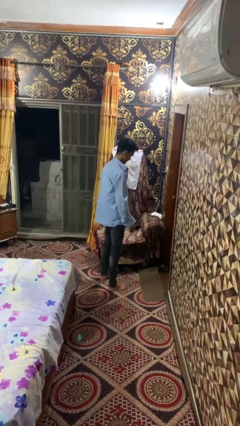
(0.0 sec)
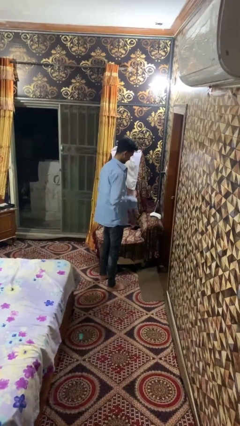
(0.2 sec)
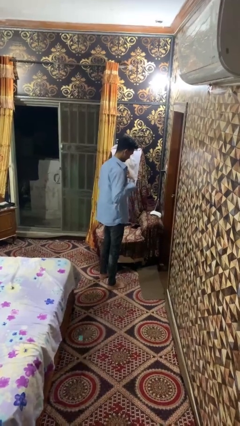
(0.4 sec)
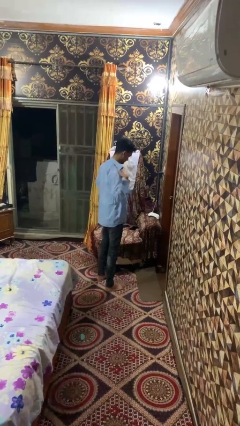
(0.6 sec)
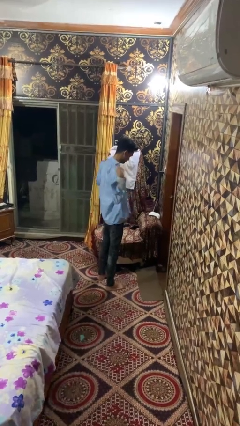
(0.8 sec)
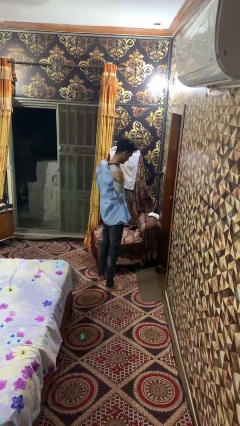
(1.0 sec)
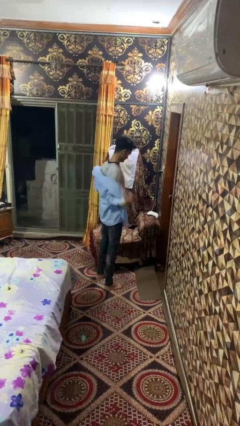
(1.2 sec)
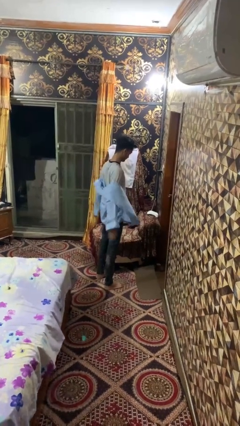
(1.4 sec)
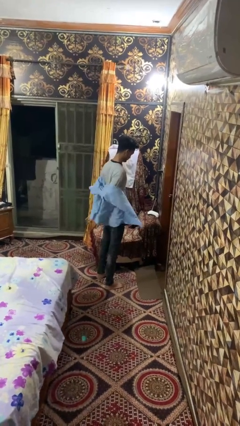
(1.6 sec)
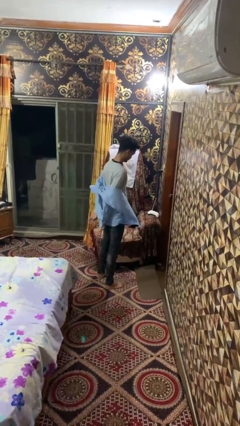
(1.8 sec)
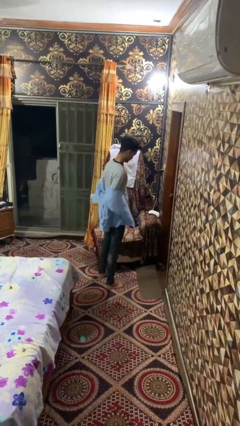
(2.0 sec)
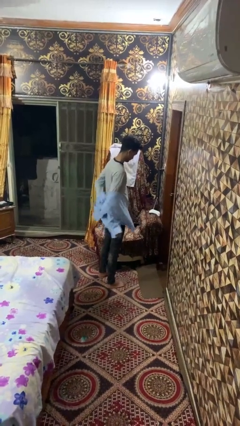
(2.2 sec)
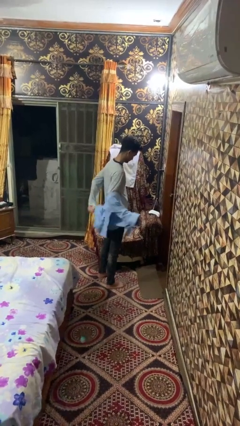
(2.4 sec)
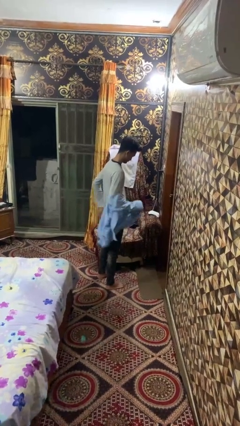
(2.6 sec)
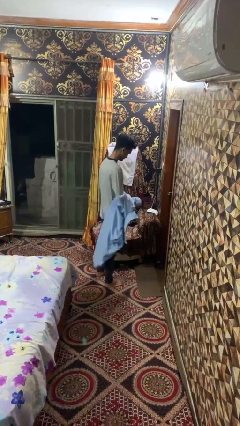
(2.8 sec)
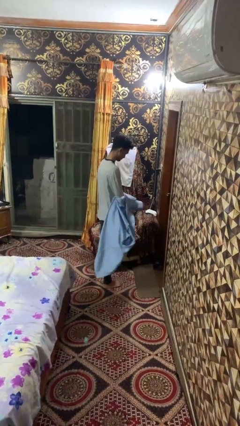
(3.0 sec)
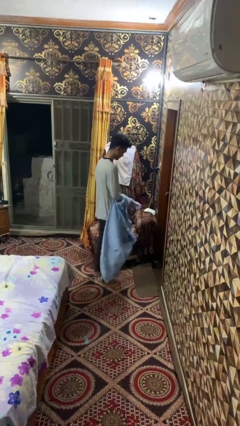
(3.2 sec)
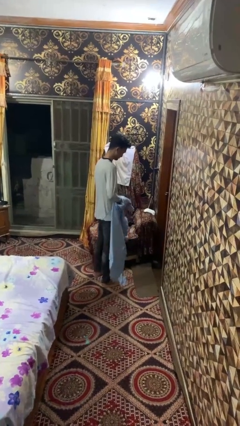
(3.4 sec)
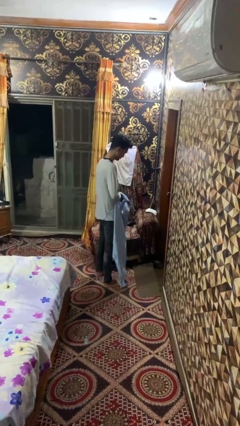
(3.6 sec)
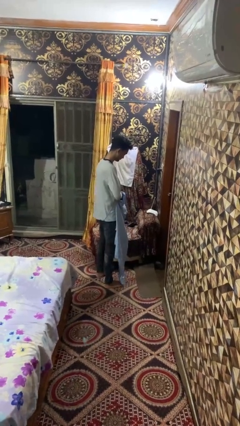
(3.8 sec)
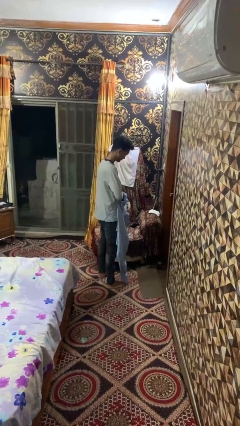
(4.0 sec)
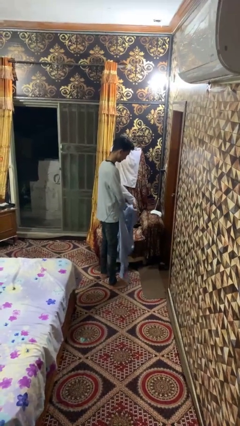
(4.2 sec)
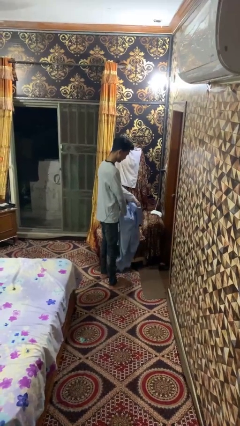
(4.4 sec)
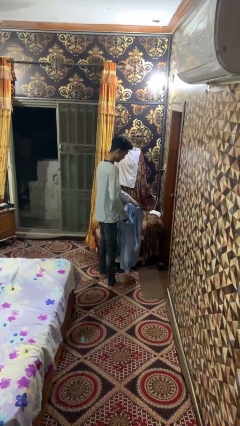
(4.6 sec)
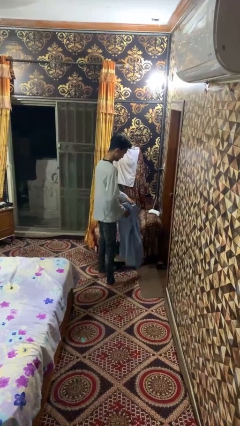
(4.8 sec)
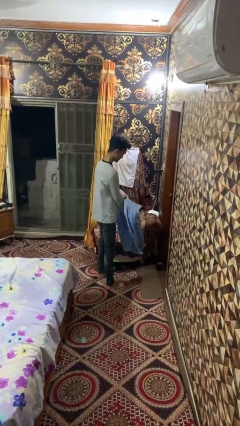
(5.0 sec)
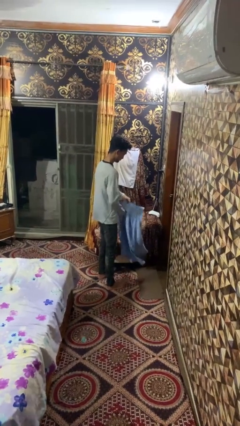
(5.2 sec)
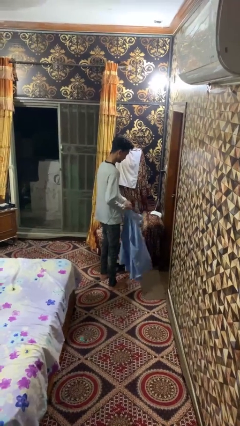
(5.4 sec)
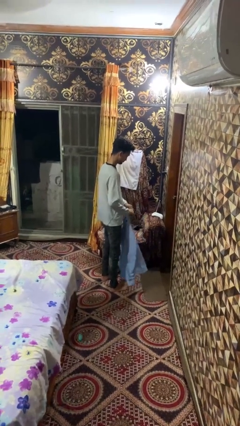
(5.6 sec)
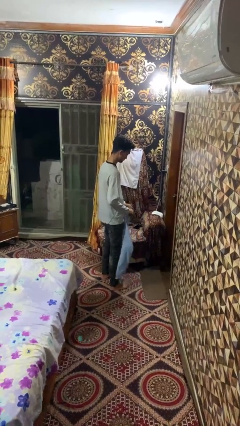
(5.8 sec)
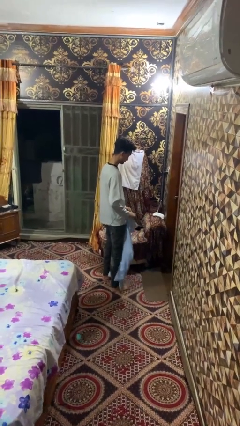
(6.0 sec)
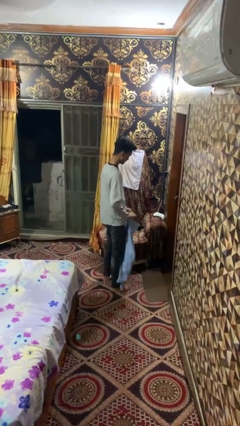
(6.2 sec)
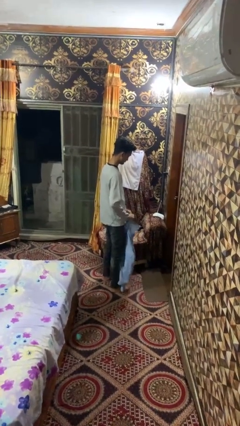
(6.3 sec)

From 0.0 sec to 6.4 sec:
person takes off shirt

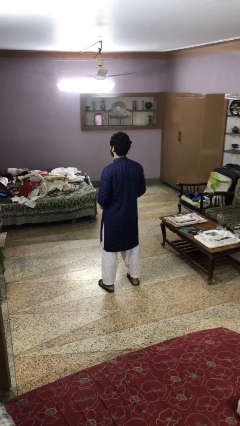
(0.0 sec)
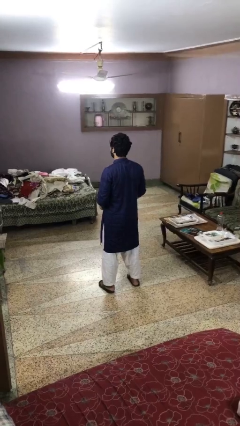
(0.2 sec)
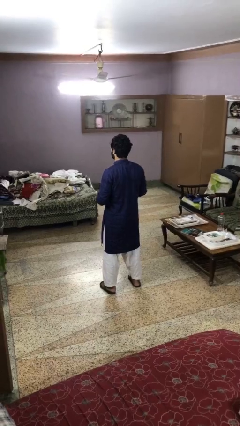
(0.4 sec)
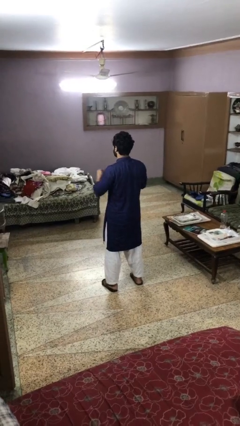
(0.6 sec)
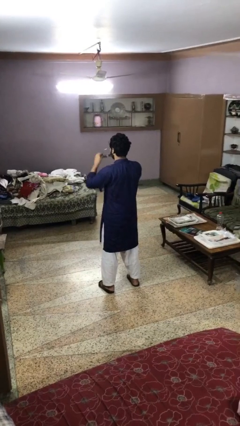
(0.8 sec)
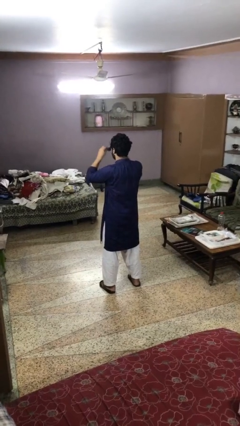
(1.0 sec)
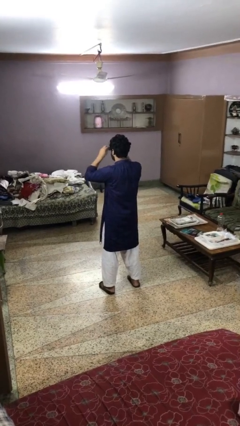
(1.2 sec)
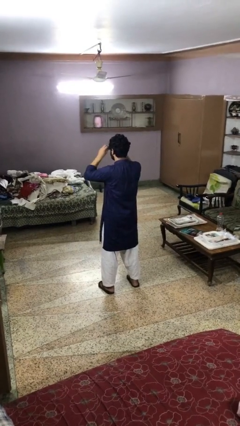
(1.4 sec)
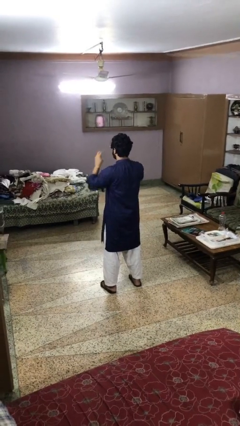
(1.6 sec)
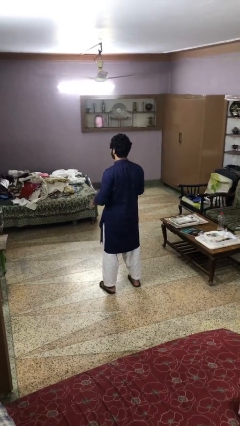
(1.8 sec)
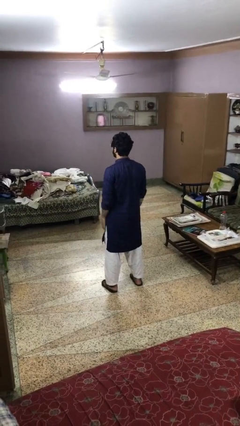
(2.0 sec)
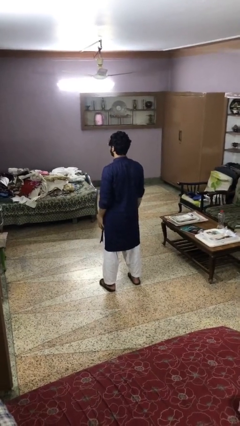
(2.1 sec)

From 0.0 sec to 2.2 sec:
person puts on sunglasses

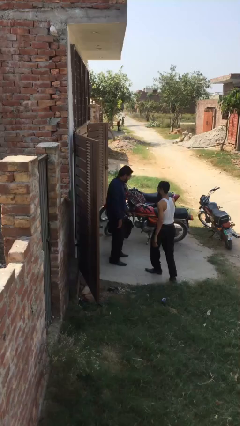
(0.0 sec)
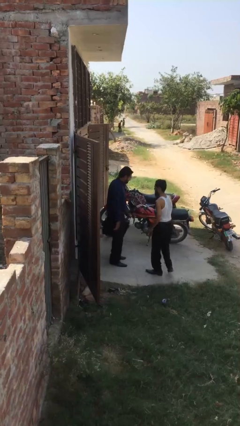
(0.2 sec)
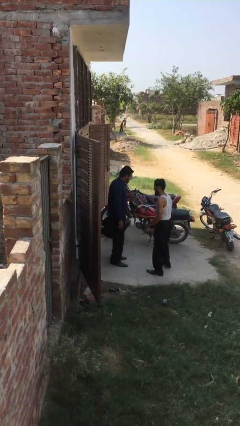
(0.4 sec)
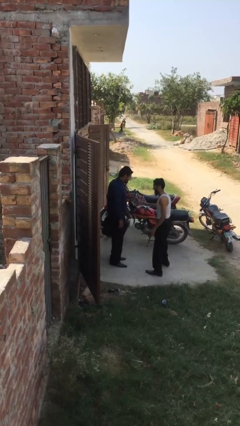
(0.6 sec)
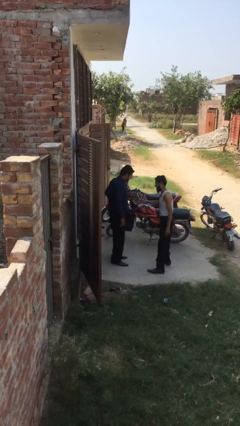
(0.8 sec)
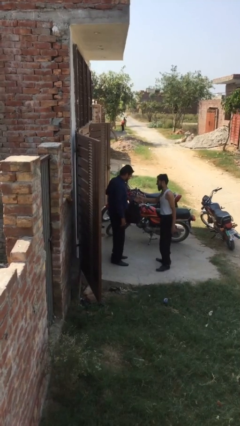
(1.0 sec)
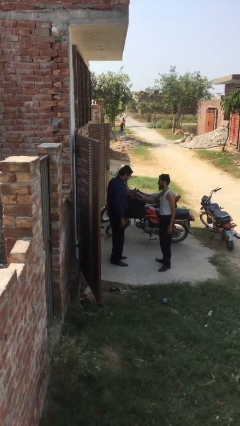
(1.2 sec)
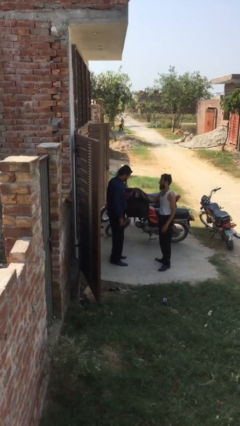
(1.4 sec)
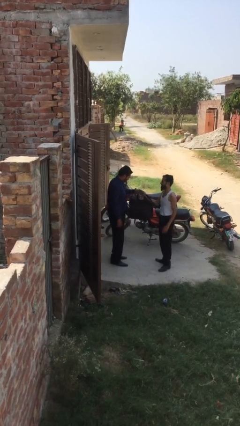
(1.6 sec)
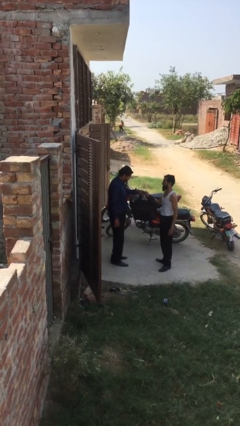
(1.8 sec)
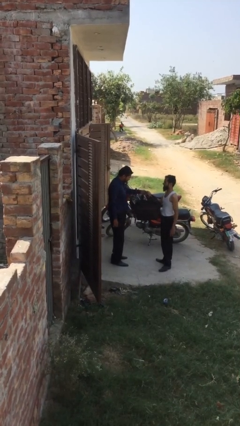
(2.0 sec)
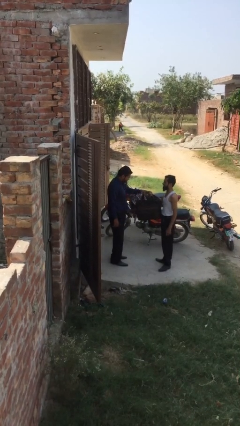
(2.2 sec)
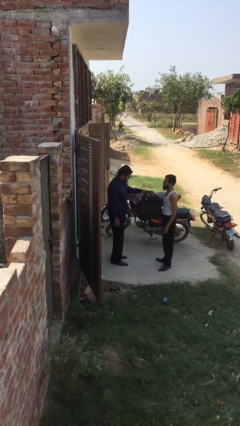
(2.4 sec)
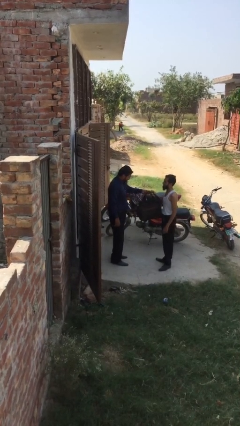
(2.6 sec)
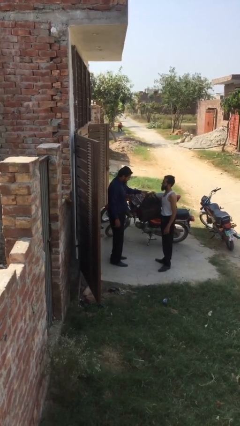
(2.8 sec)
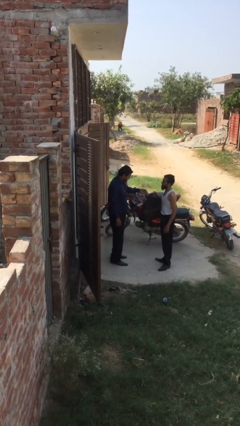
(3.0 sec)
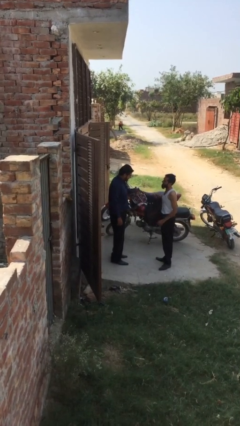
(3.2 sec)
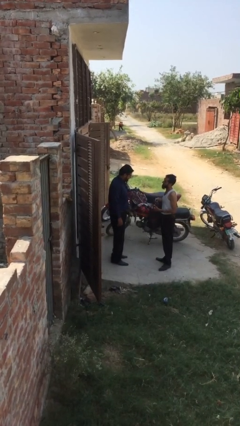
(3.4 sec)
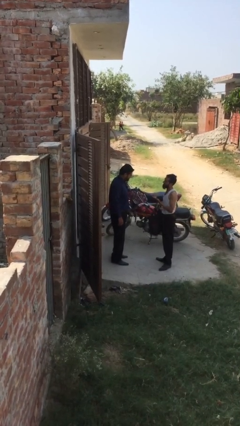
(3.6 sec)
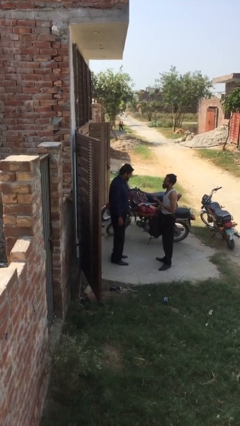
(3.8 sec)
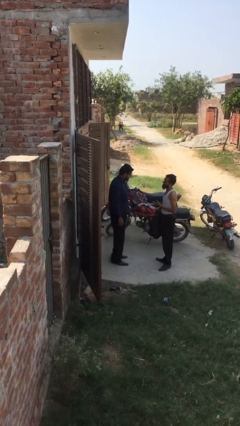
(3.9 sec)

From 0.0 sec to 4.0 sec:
person transfers object to person

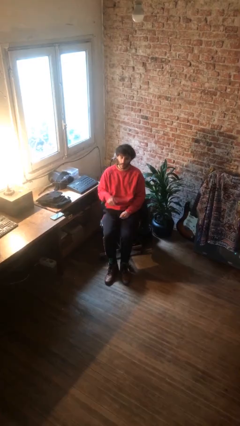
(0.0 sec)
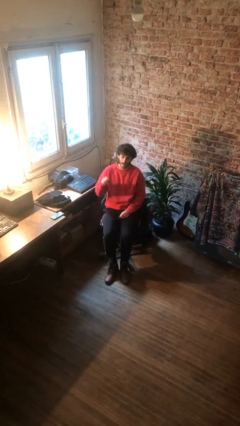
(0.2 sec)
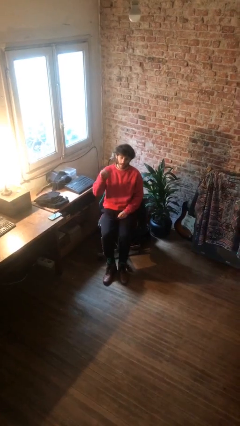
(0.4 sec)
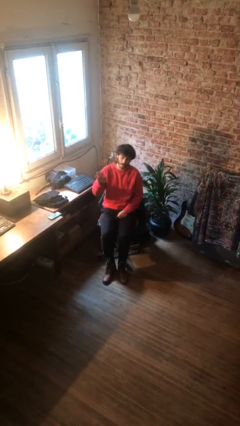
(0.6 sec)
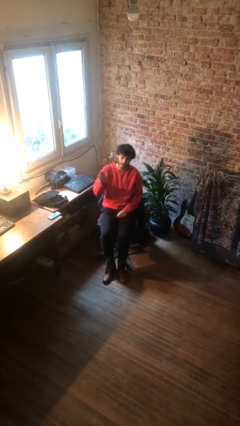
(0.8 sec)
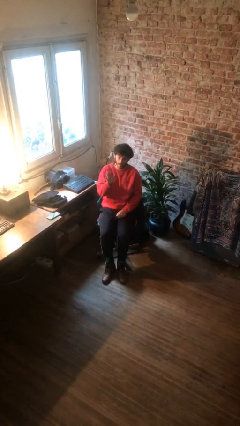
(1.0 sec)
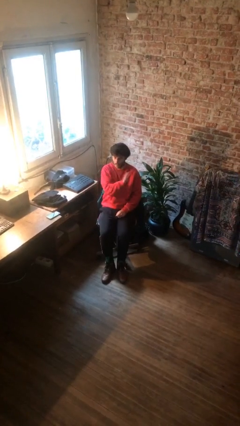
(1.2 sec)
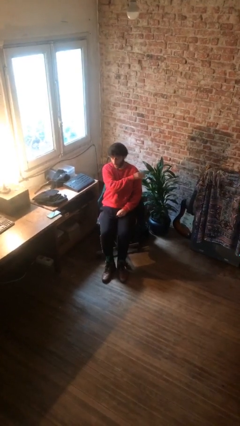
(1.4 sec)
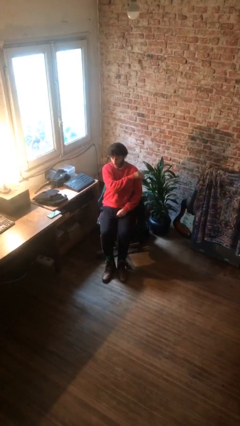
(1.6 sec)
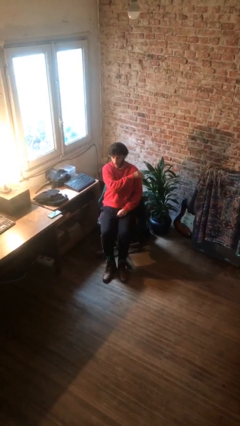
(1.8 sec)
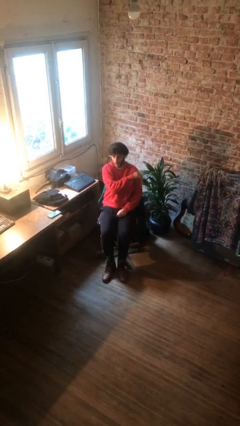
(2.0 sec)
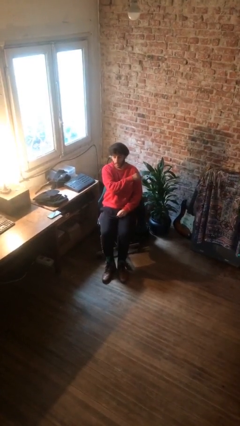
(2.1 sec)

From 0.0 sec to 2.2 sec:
person gestures swipe left

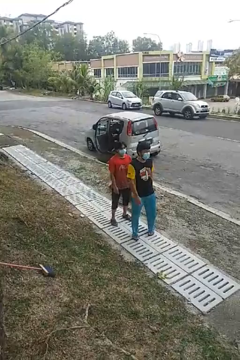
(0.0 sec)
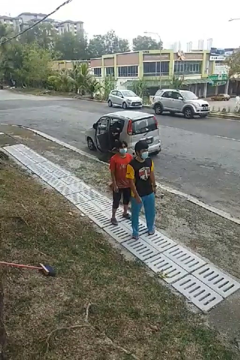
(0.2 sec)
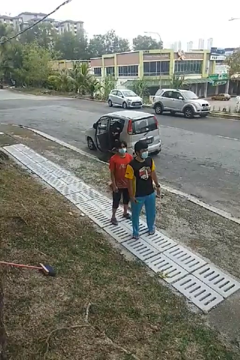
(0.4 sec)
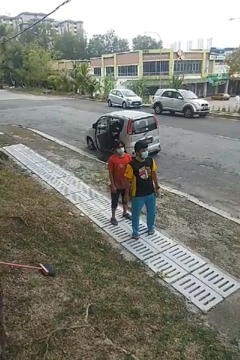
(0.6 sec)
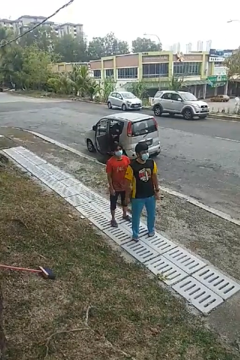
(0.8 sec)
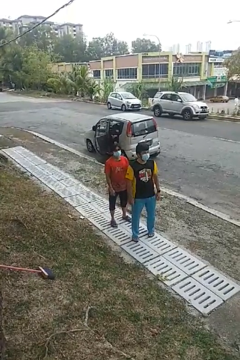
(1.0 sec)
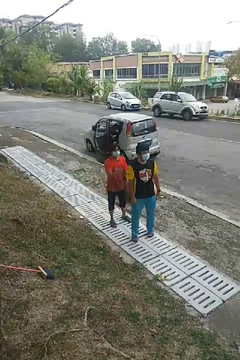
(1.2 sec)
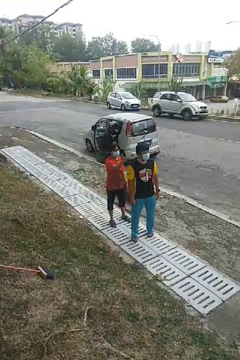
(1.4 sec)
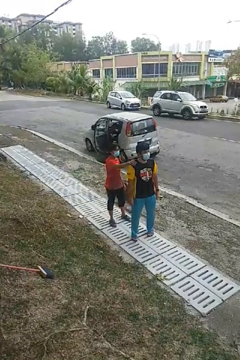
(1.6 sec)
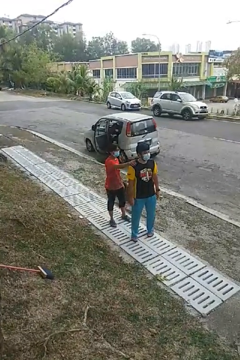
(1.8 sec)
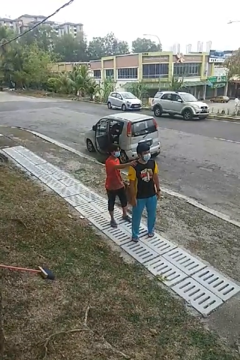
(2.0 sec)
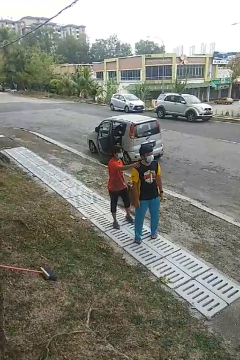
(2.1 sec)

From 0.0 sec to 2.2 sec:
person grabs person by shoulder

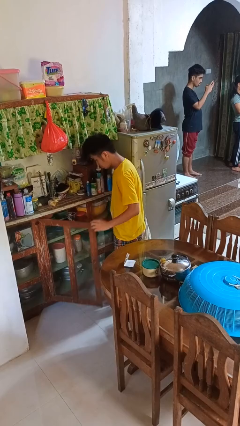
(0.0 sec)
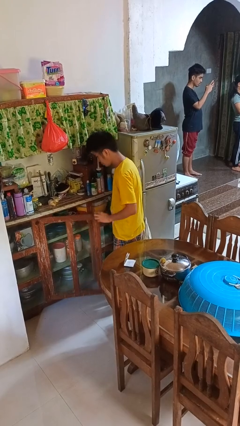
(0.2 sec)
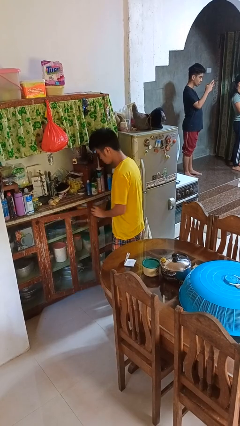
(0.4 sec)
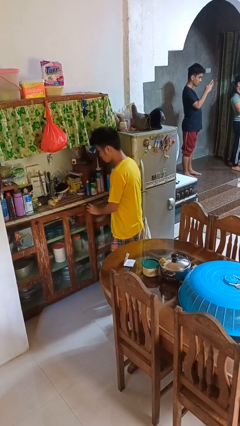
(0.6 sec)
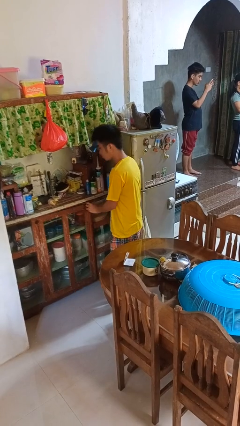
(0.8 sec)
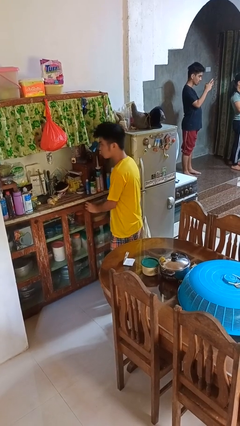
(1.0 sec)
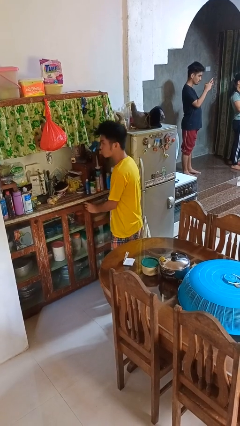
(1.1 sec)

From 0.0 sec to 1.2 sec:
person closes cabinet
